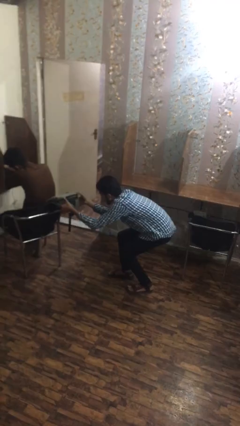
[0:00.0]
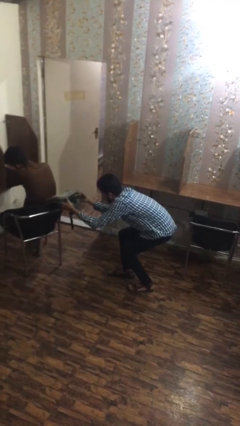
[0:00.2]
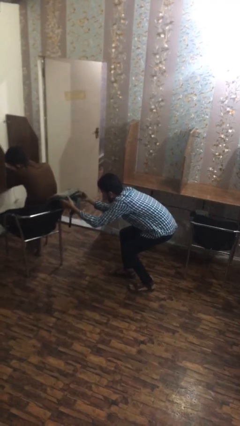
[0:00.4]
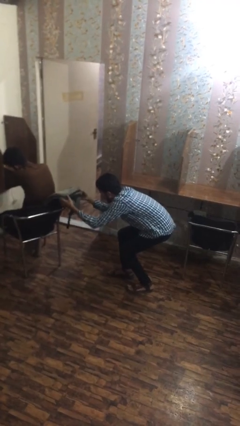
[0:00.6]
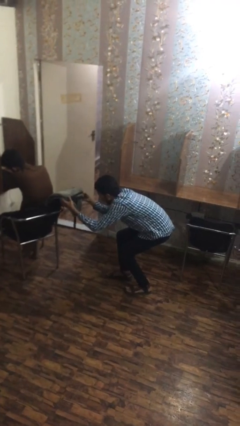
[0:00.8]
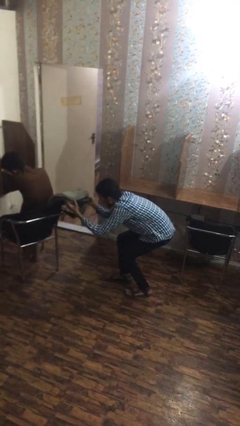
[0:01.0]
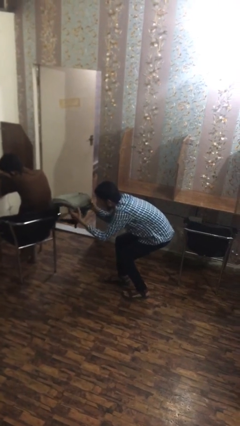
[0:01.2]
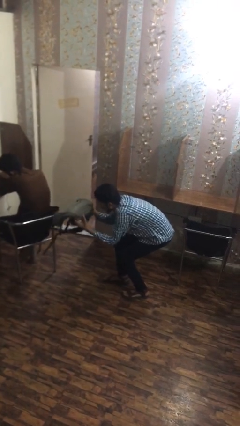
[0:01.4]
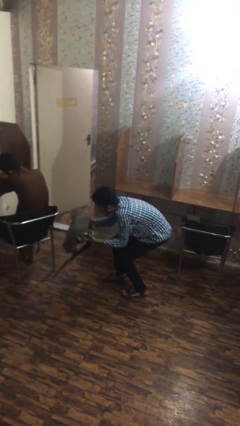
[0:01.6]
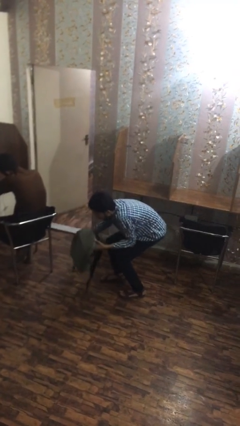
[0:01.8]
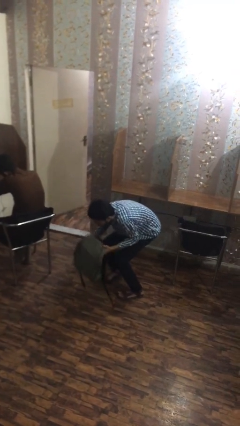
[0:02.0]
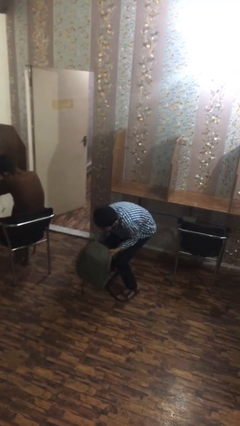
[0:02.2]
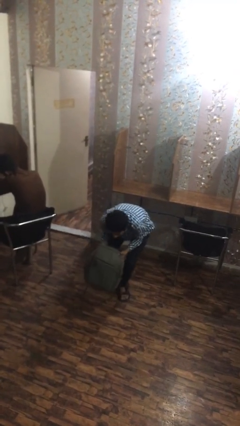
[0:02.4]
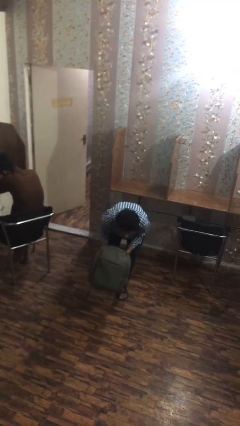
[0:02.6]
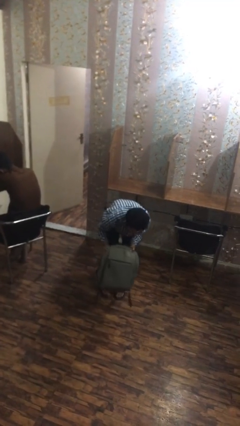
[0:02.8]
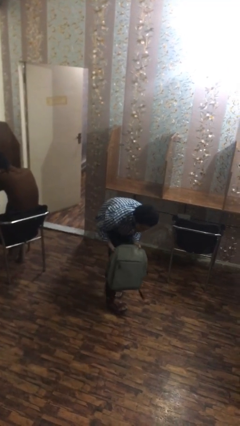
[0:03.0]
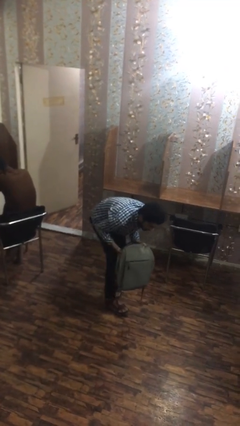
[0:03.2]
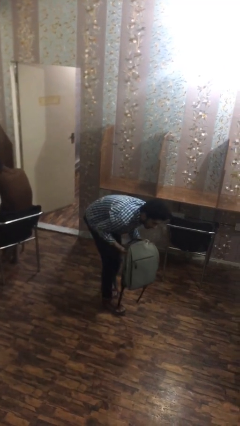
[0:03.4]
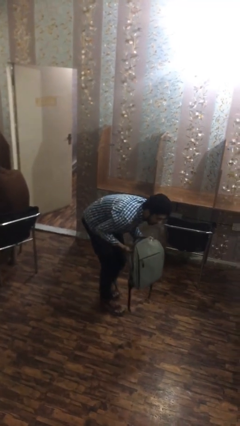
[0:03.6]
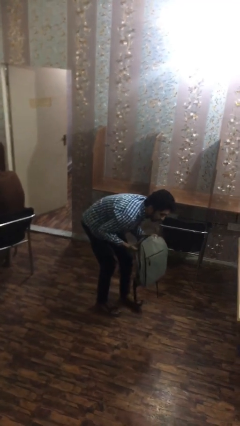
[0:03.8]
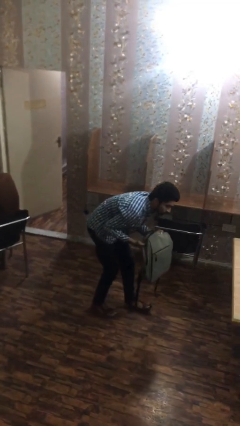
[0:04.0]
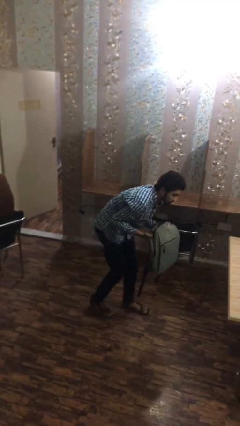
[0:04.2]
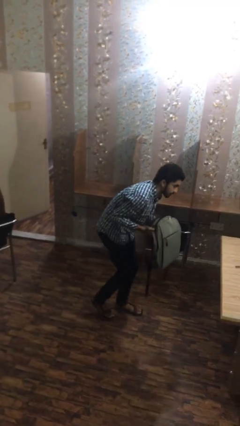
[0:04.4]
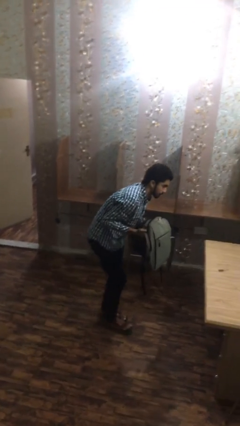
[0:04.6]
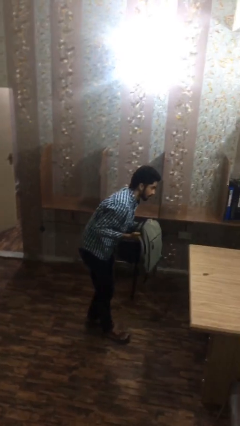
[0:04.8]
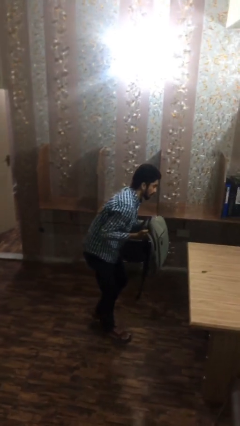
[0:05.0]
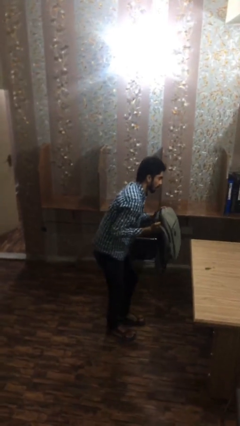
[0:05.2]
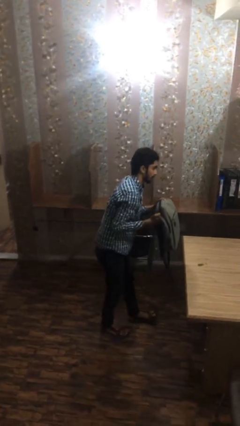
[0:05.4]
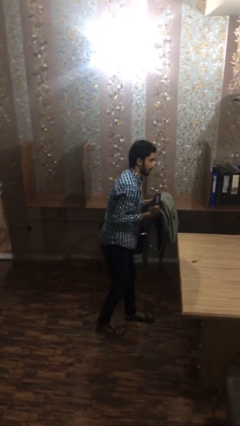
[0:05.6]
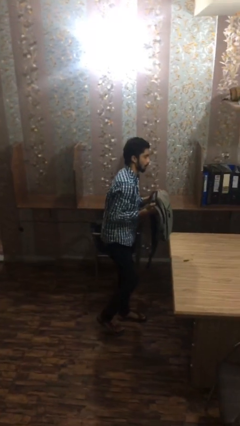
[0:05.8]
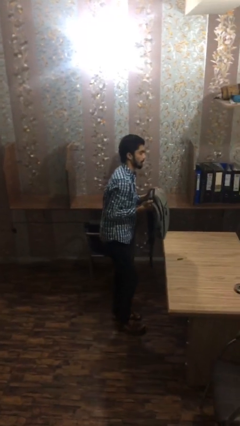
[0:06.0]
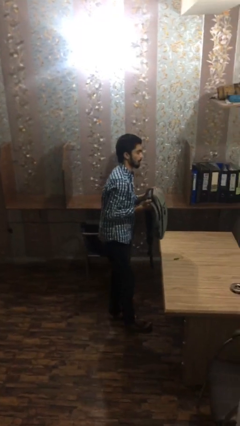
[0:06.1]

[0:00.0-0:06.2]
person steals object from person

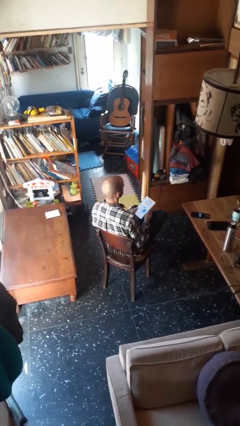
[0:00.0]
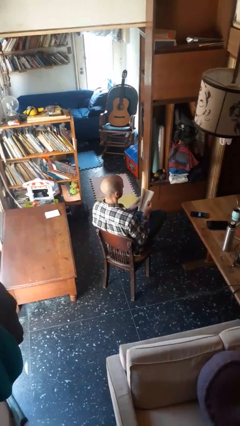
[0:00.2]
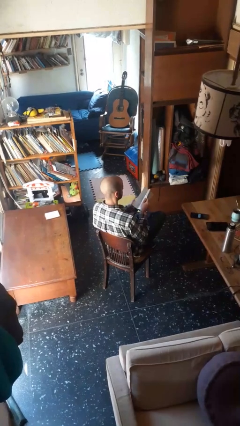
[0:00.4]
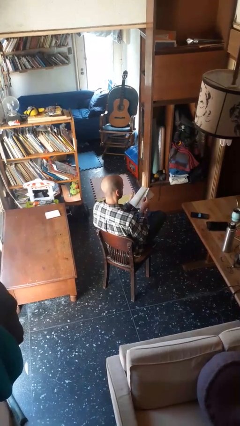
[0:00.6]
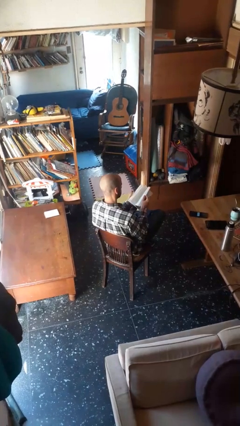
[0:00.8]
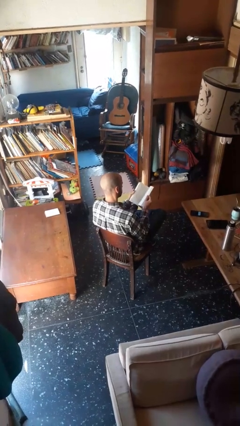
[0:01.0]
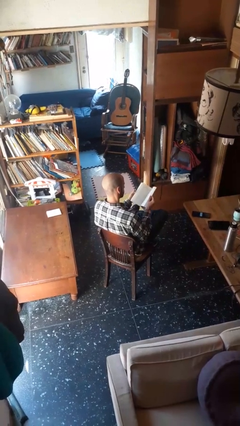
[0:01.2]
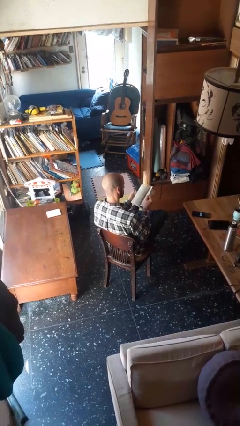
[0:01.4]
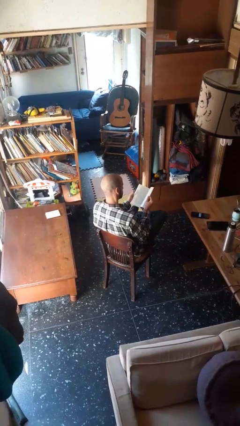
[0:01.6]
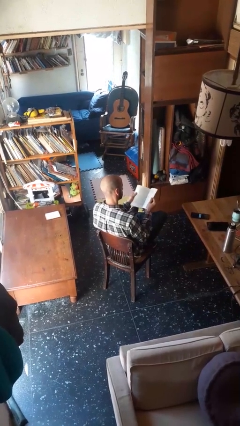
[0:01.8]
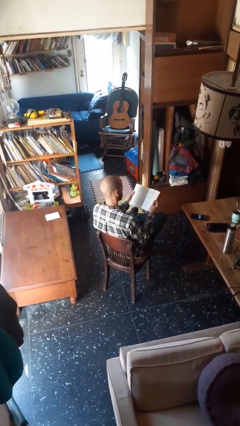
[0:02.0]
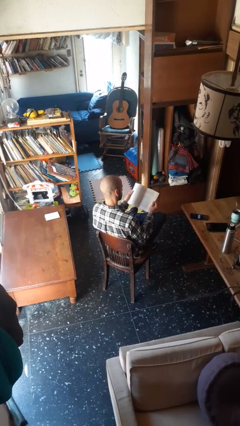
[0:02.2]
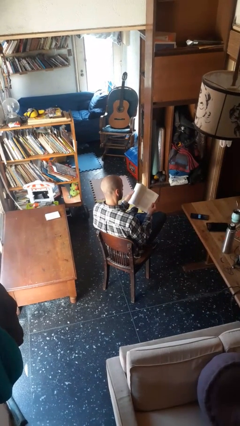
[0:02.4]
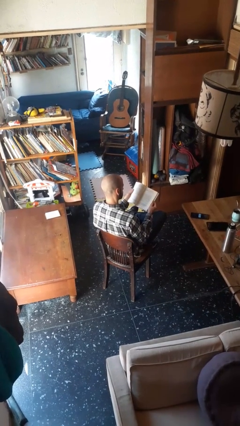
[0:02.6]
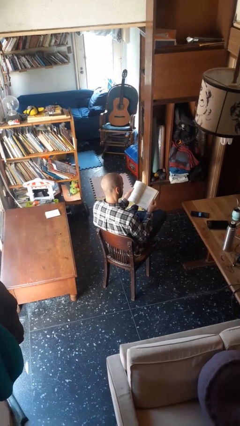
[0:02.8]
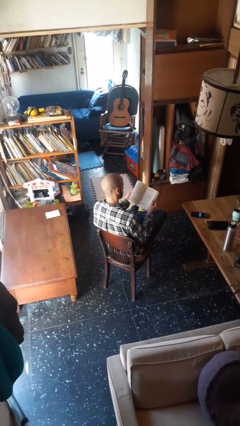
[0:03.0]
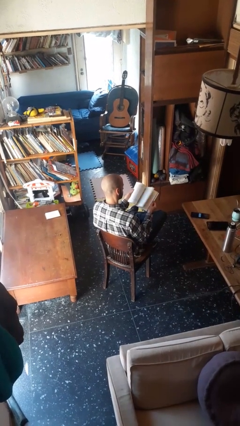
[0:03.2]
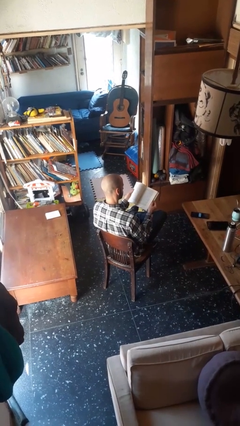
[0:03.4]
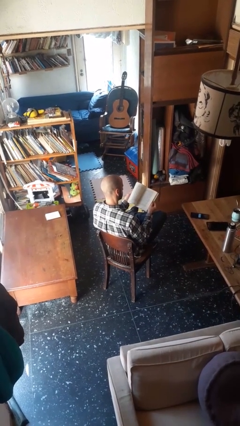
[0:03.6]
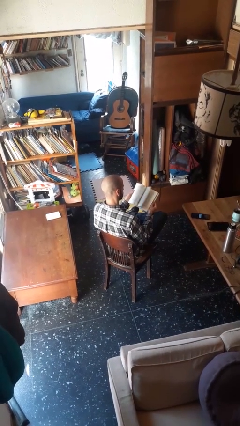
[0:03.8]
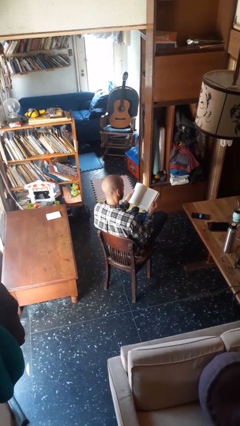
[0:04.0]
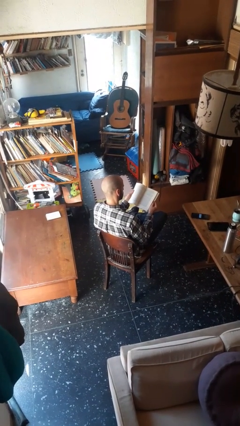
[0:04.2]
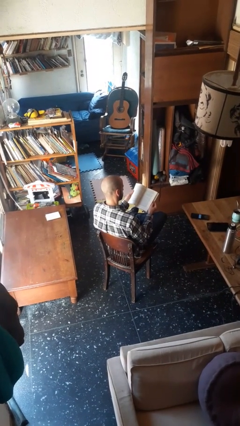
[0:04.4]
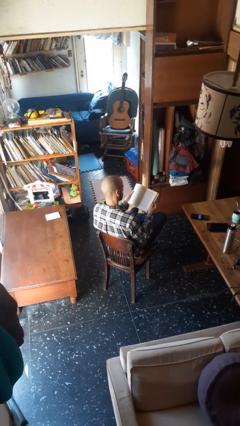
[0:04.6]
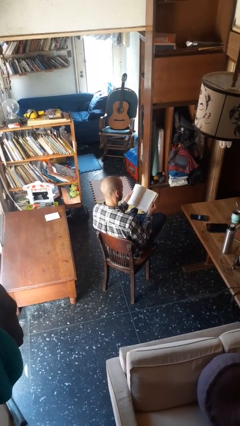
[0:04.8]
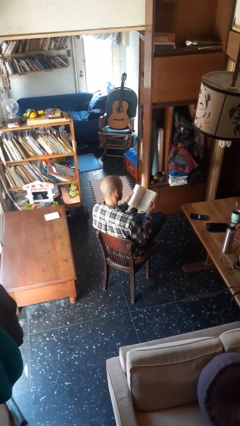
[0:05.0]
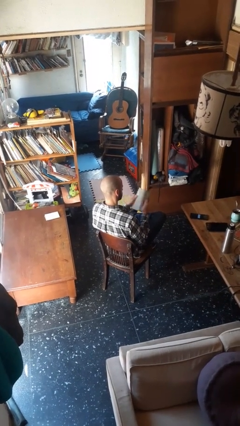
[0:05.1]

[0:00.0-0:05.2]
person reads book

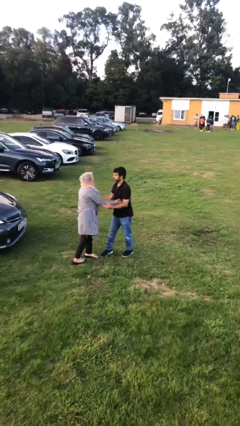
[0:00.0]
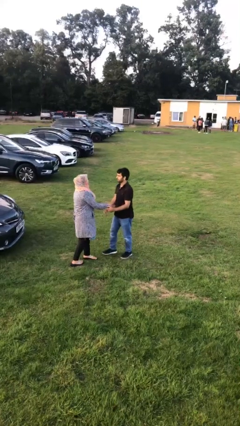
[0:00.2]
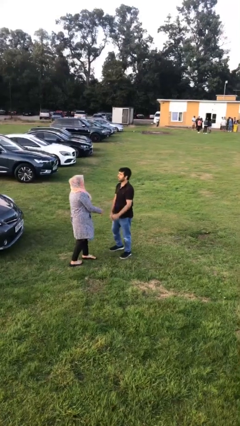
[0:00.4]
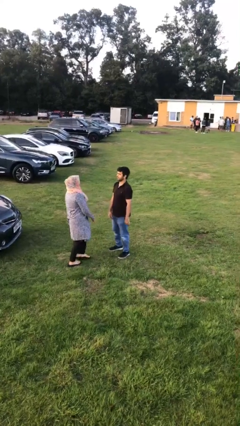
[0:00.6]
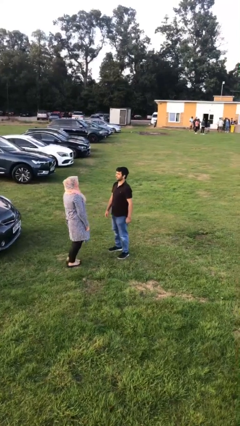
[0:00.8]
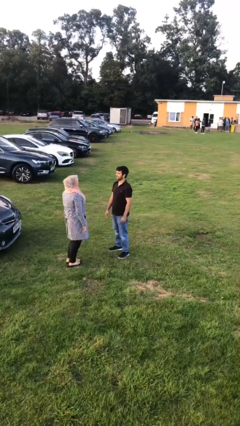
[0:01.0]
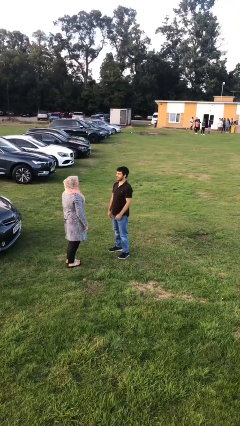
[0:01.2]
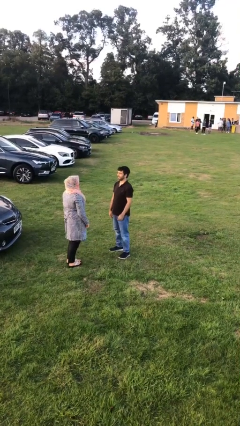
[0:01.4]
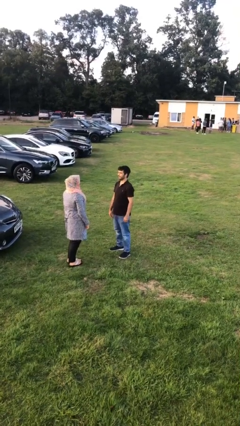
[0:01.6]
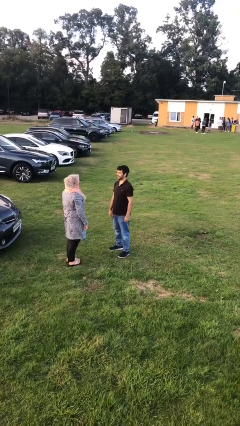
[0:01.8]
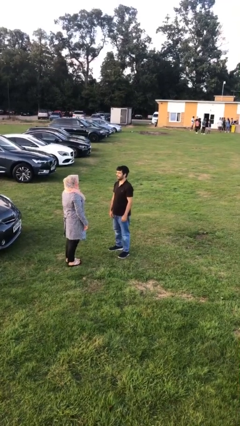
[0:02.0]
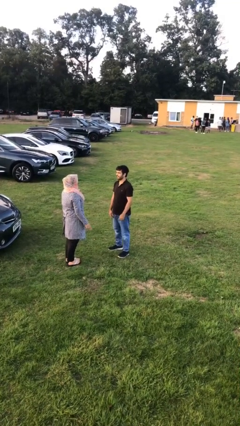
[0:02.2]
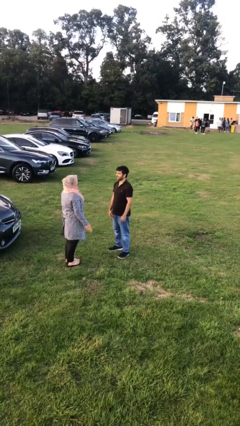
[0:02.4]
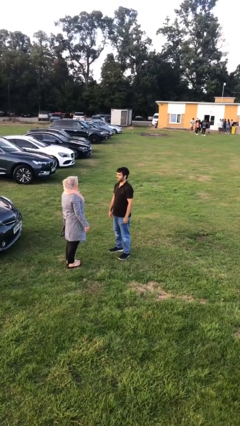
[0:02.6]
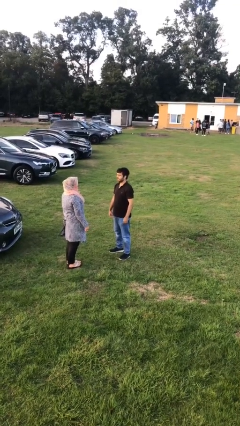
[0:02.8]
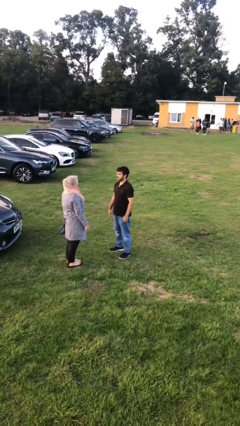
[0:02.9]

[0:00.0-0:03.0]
person talks to person

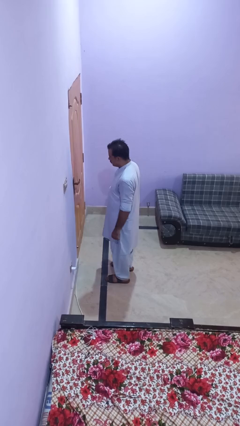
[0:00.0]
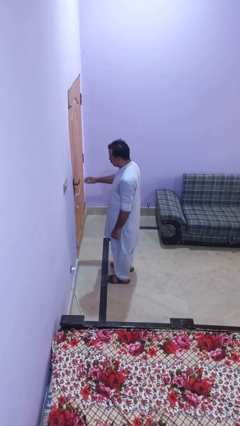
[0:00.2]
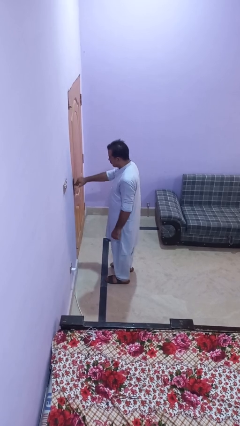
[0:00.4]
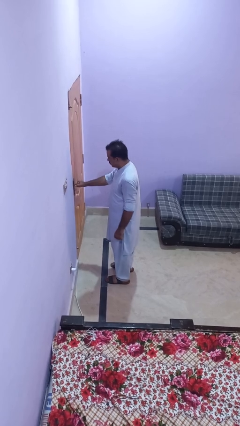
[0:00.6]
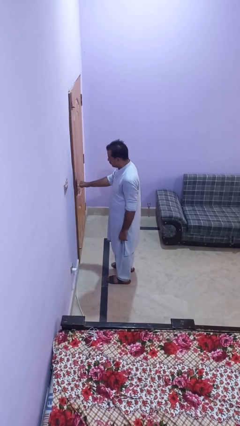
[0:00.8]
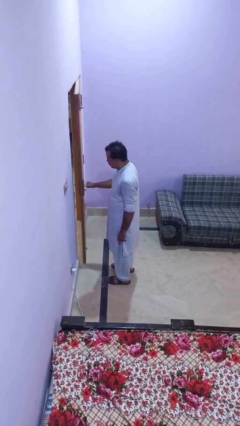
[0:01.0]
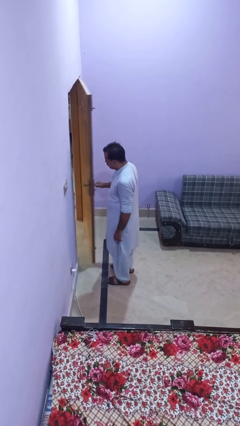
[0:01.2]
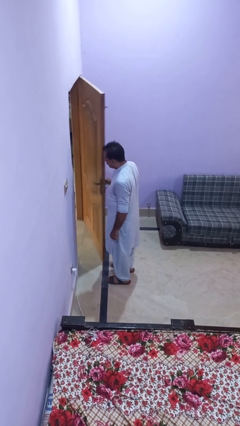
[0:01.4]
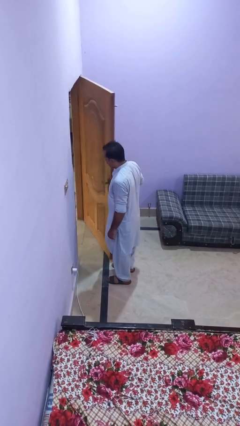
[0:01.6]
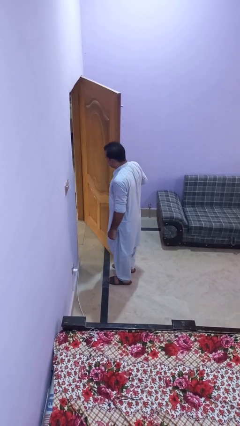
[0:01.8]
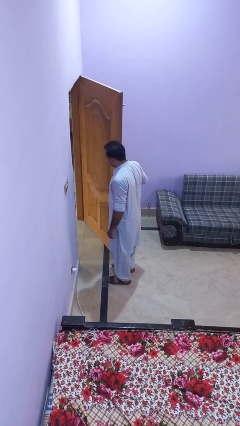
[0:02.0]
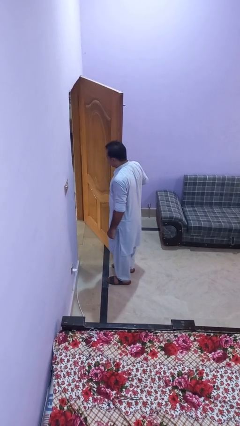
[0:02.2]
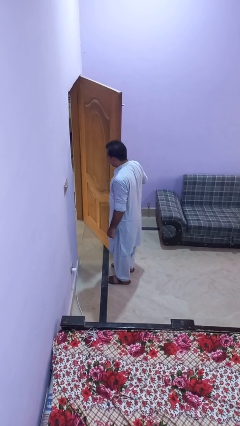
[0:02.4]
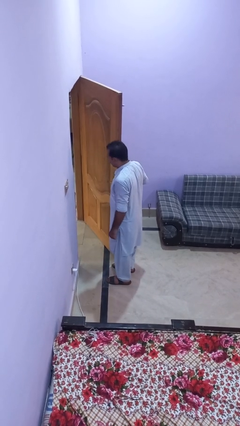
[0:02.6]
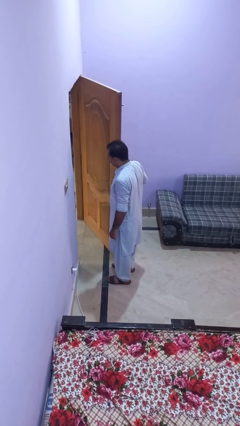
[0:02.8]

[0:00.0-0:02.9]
person opens facility door

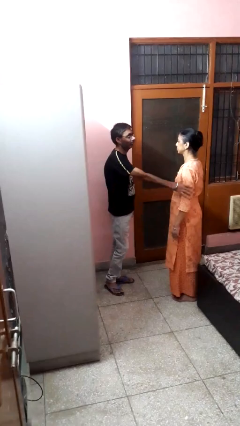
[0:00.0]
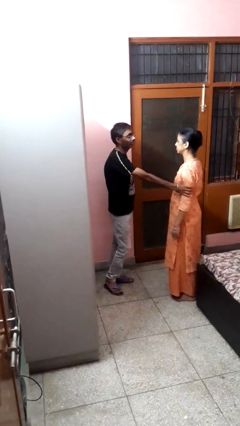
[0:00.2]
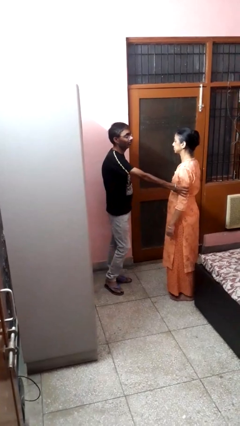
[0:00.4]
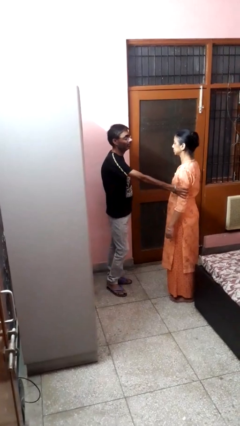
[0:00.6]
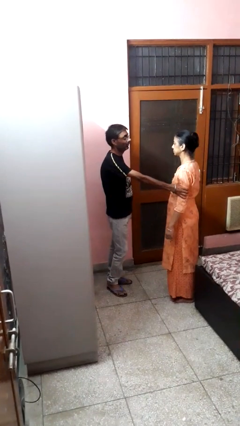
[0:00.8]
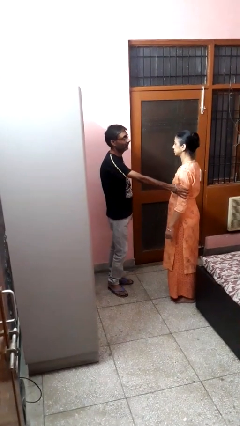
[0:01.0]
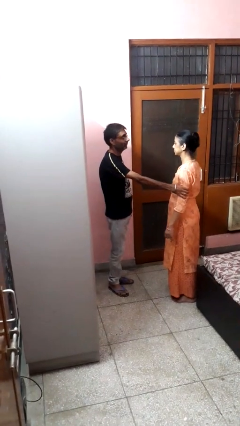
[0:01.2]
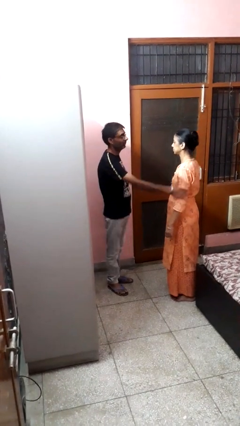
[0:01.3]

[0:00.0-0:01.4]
person grabs person by bicep
